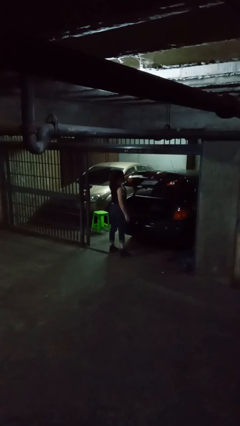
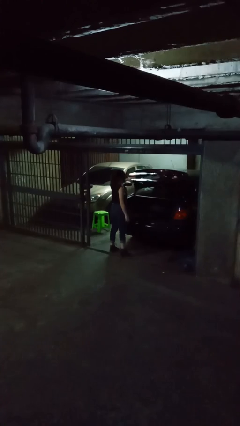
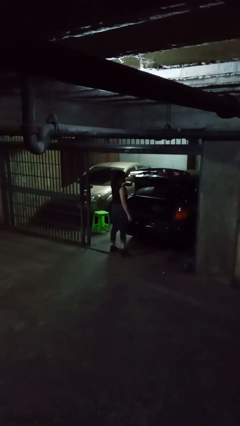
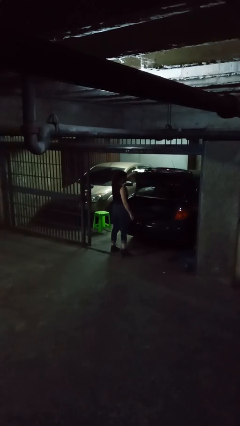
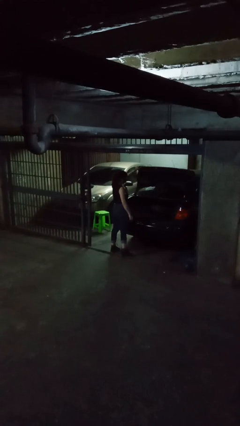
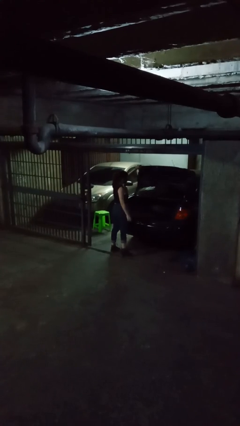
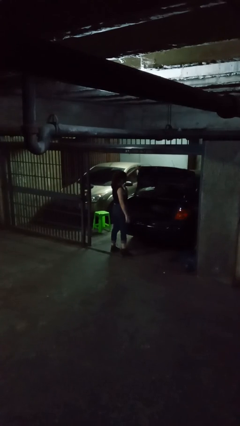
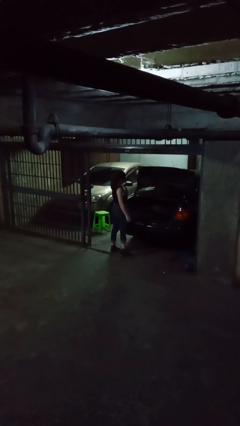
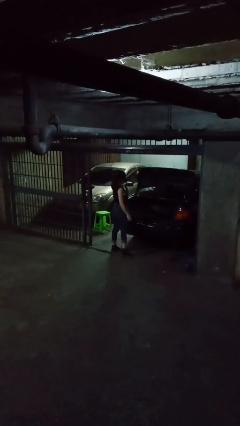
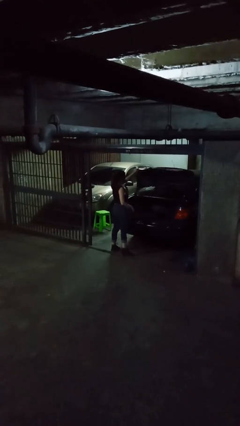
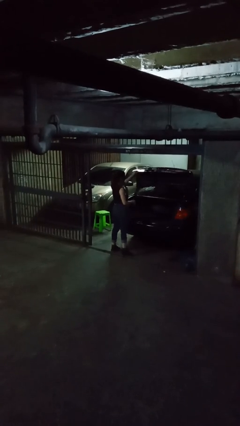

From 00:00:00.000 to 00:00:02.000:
person opens car trunk

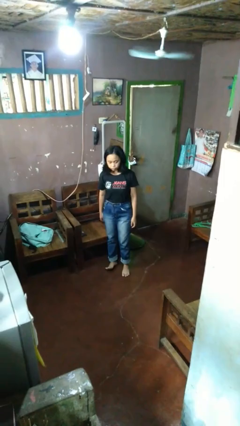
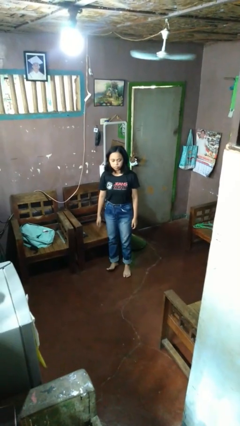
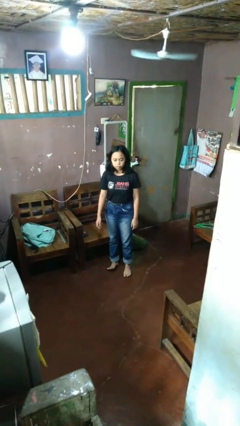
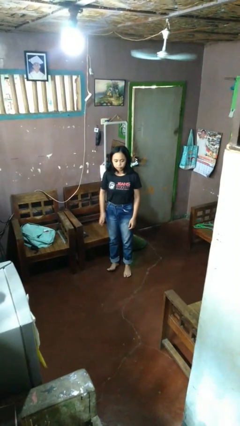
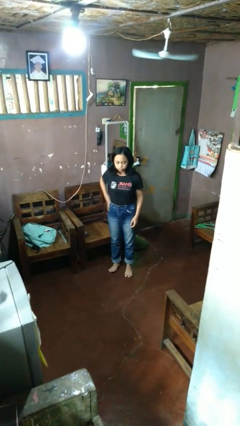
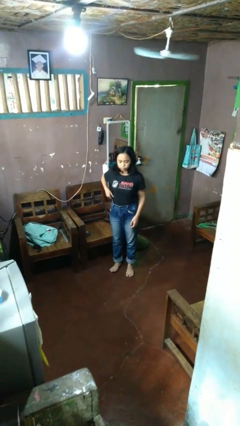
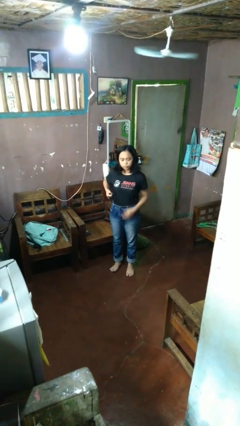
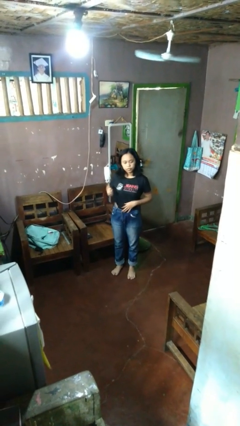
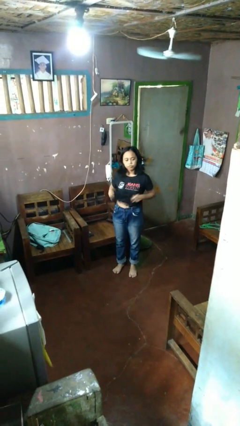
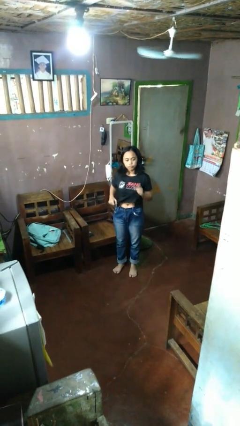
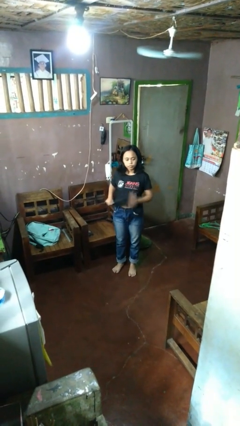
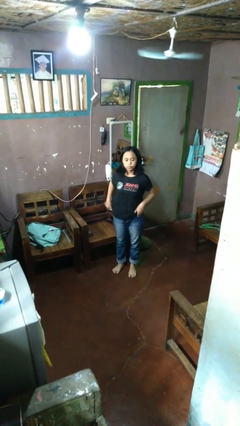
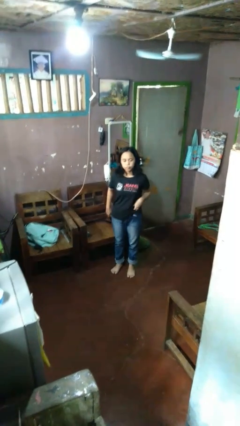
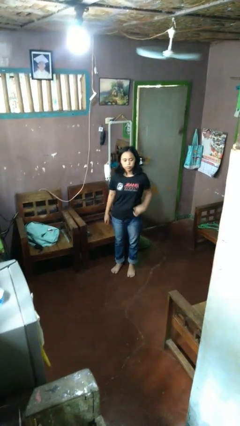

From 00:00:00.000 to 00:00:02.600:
person untucks shirt

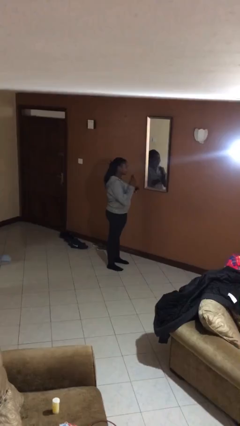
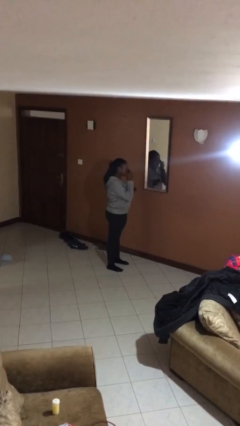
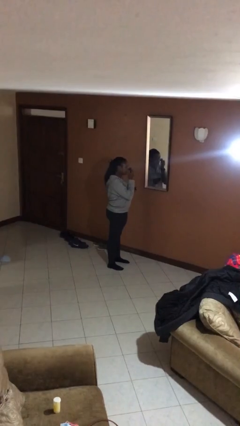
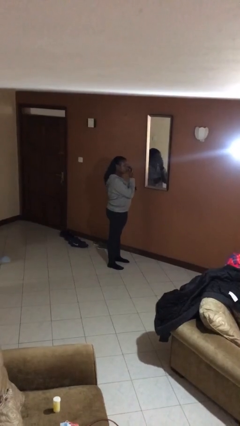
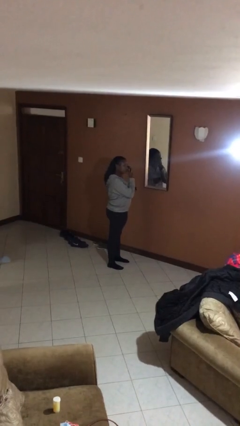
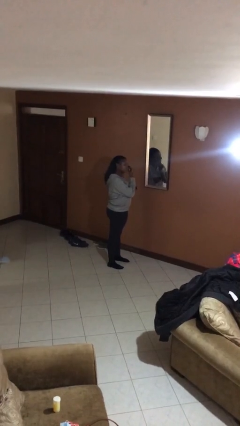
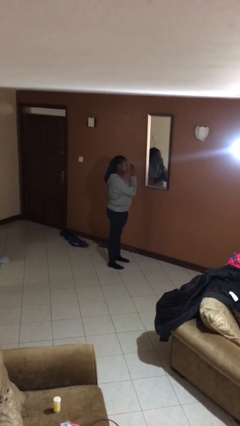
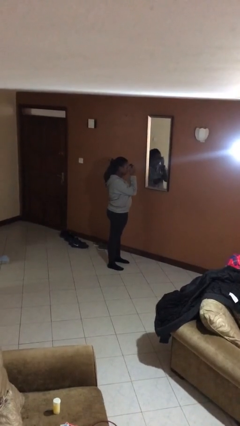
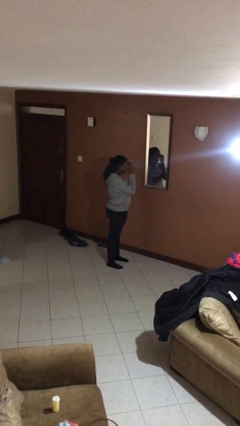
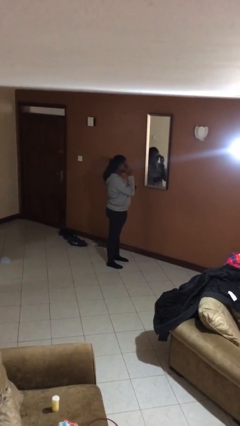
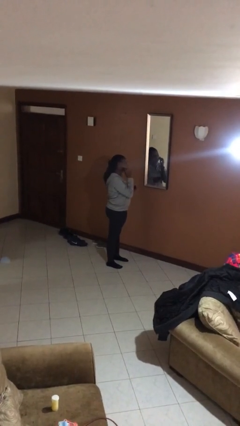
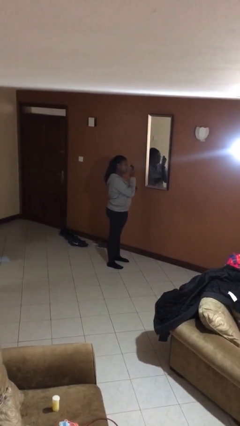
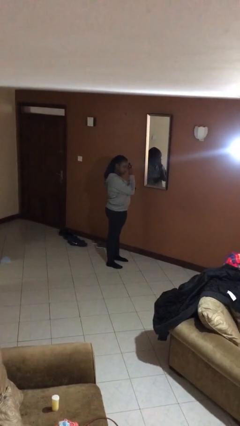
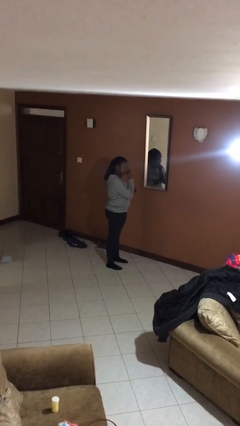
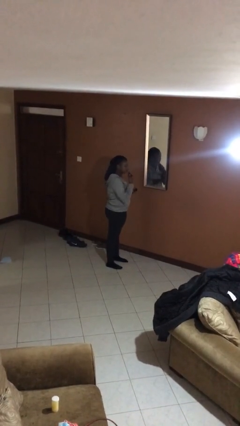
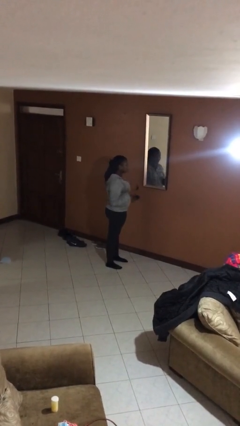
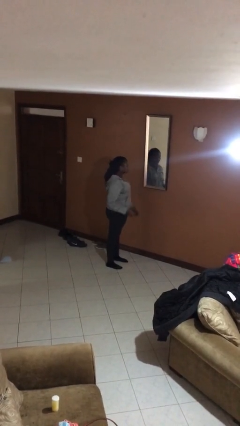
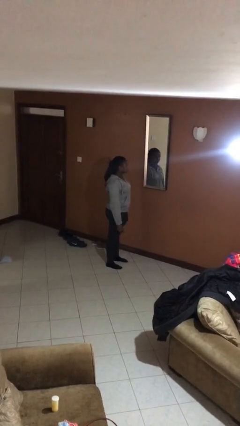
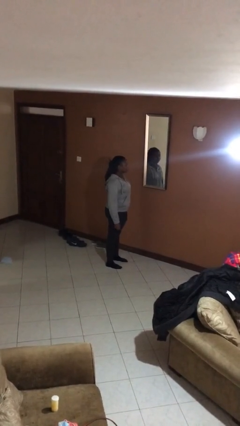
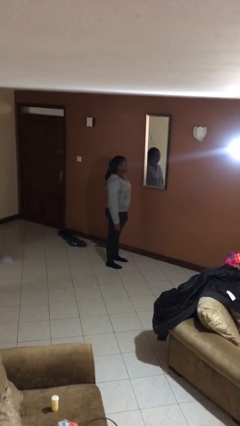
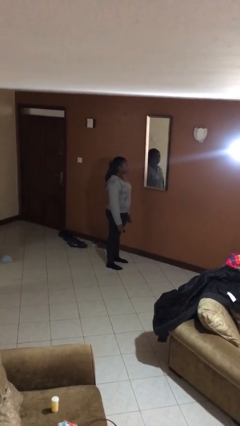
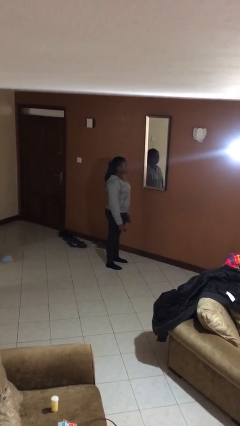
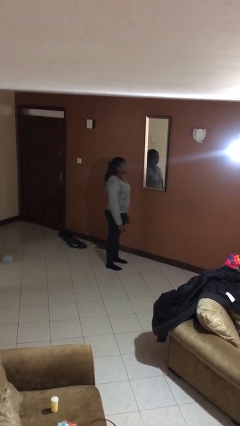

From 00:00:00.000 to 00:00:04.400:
person applies foundation makeup

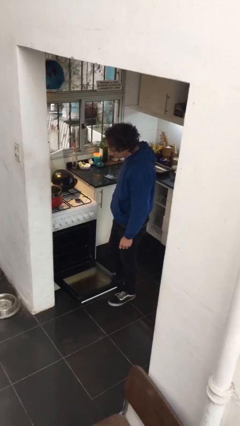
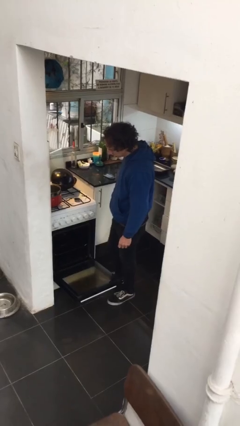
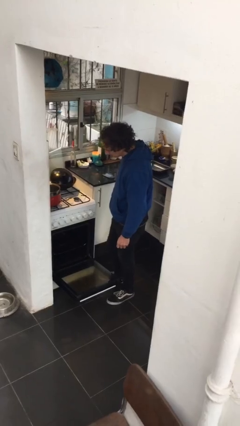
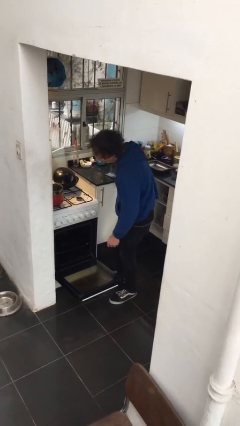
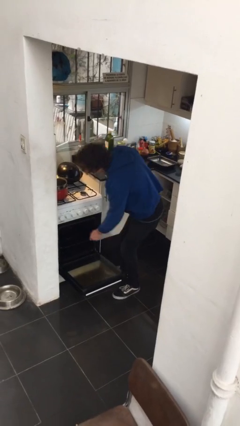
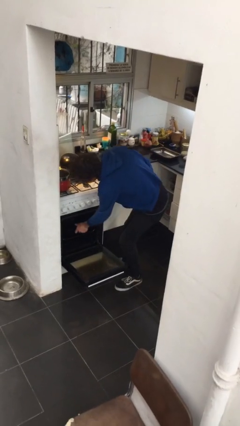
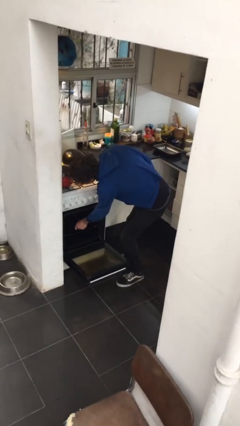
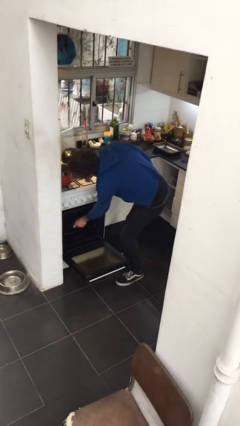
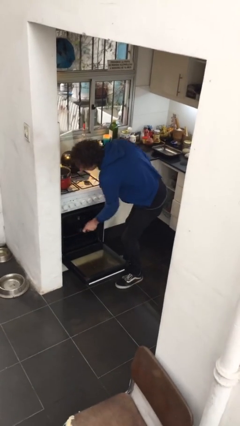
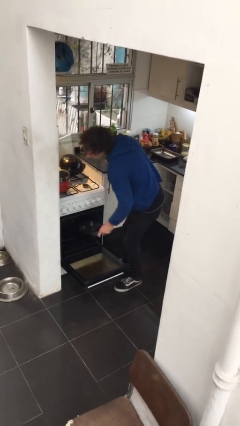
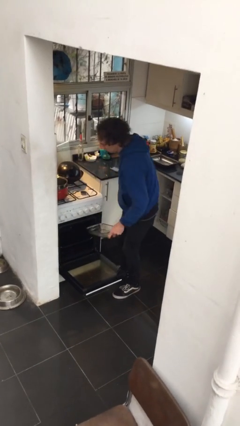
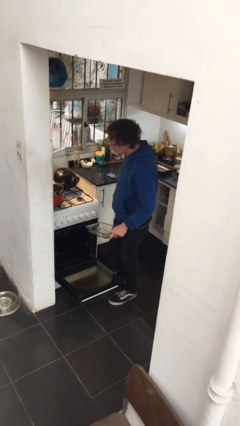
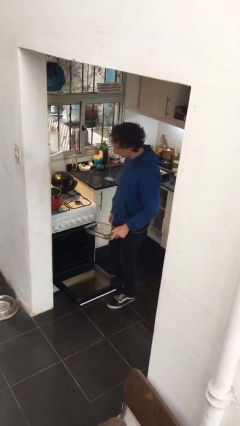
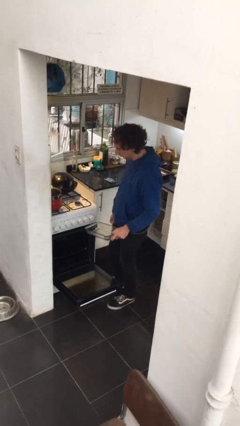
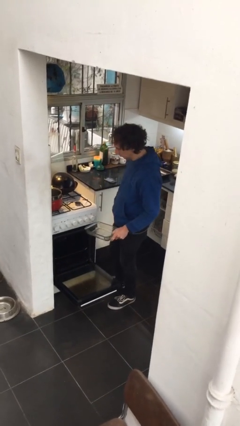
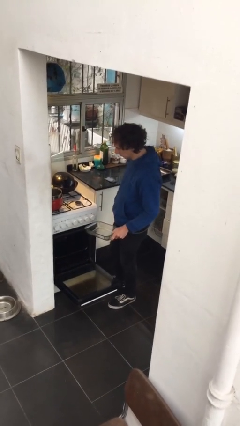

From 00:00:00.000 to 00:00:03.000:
person takes object from oven

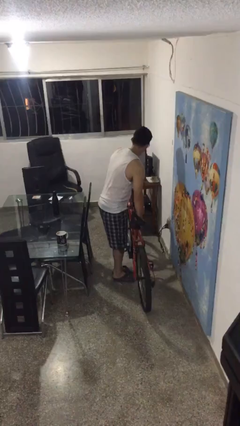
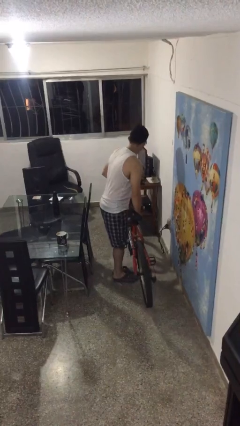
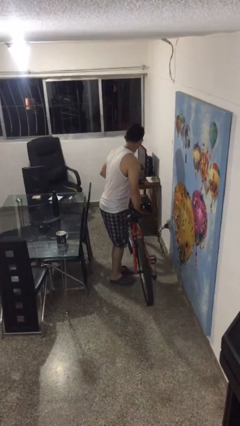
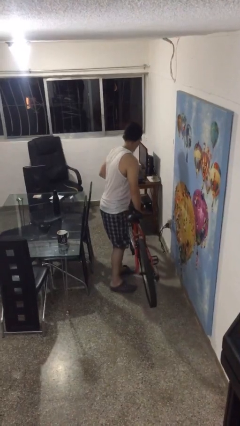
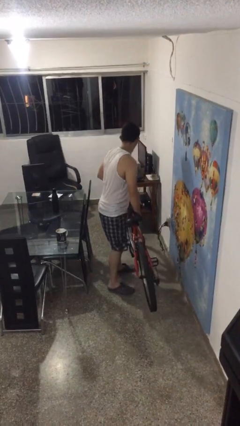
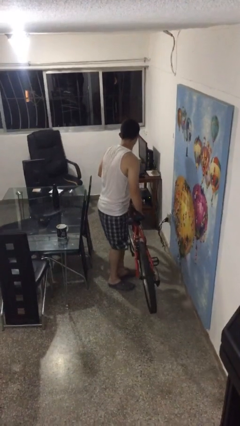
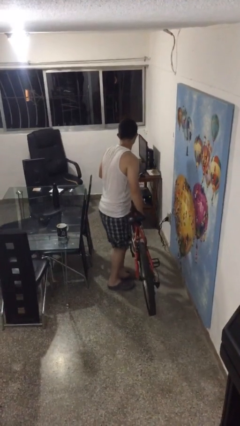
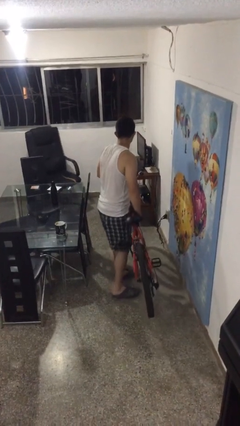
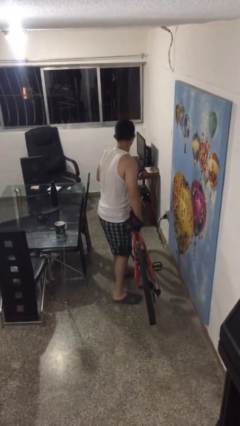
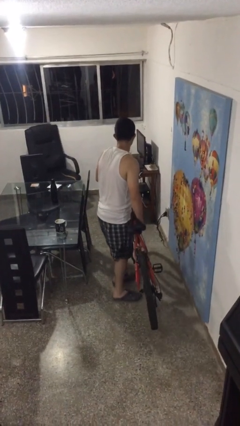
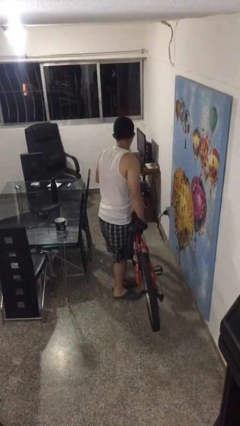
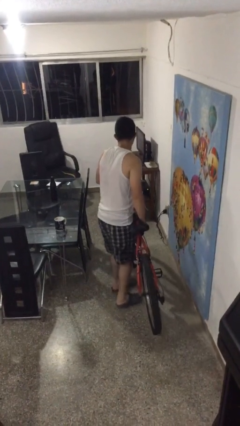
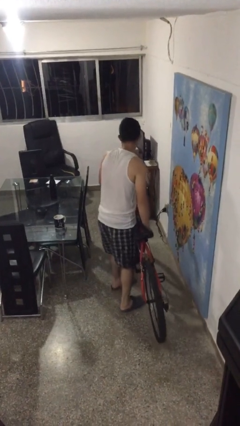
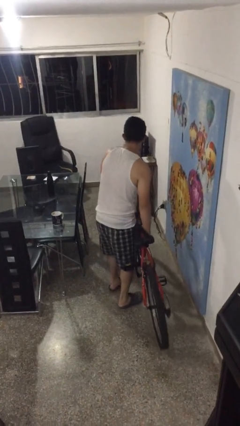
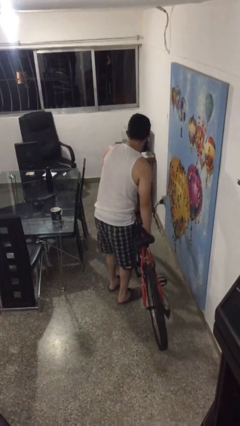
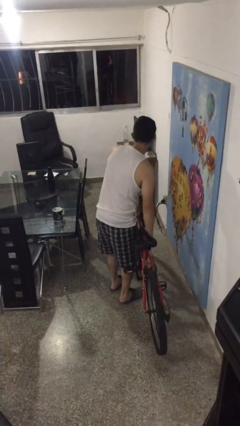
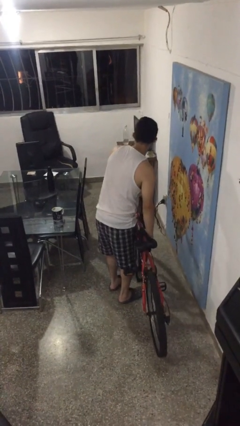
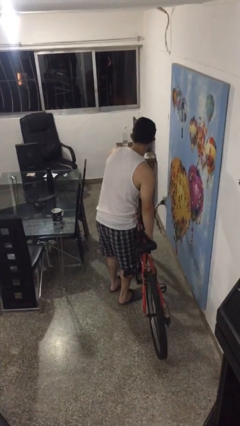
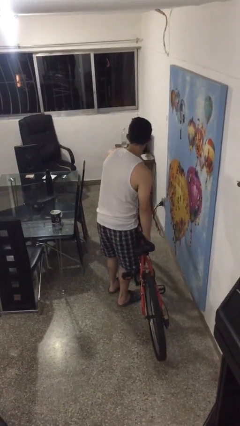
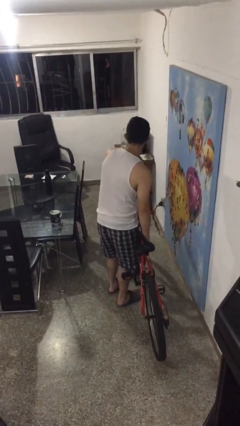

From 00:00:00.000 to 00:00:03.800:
person carries bicycle

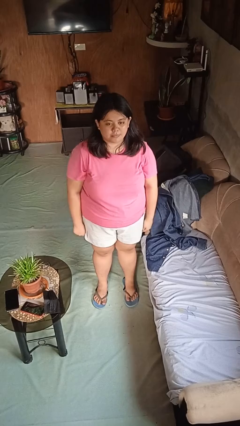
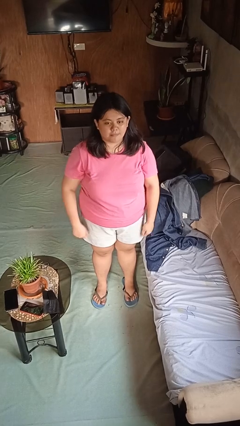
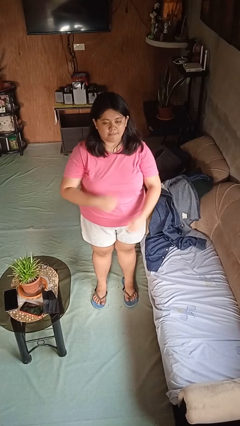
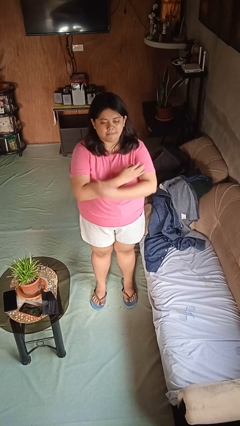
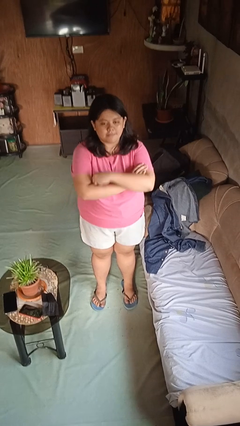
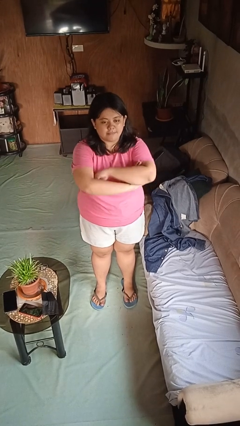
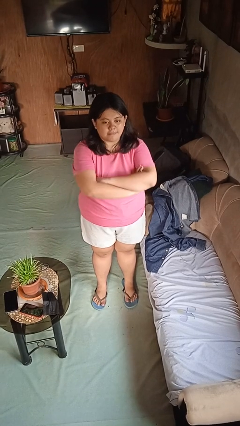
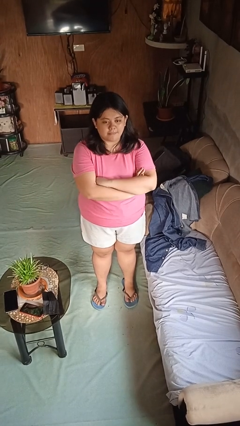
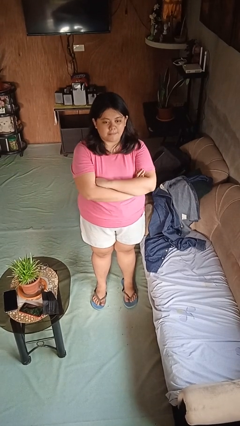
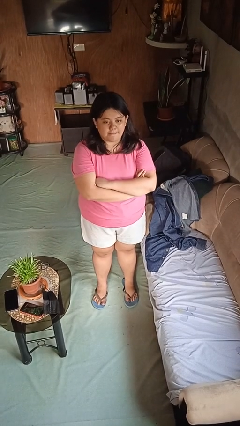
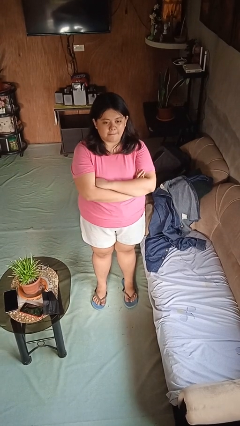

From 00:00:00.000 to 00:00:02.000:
person crosses arms
